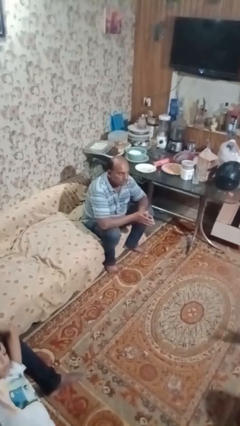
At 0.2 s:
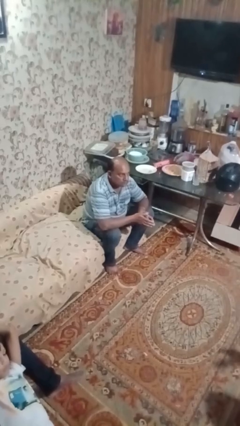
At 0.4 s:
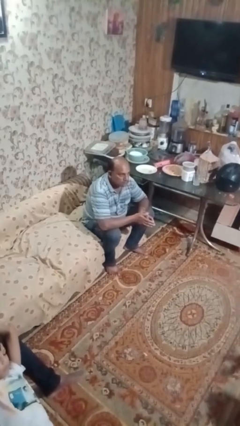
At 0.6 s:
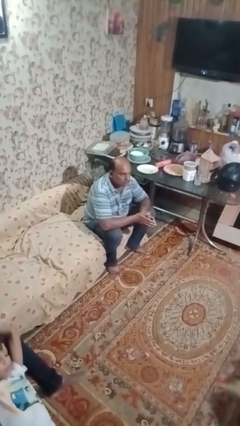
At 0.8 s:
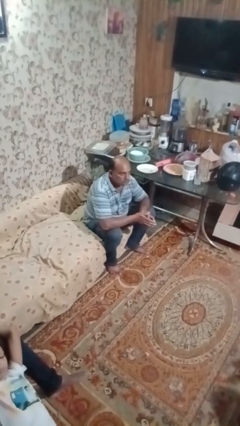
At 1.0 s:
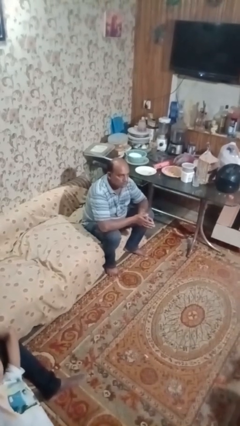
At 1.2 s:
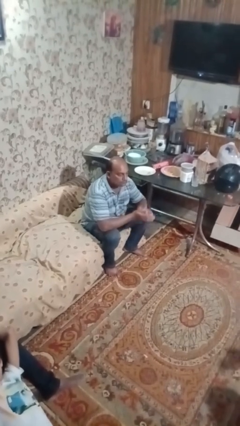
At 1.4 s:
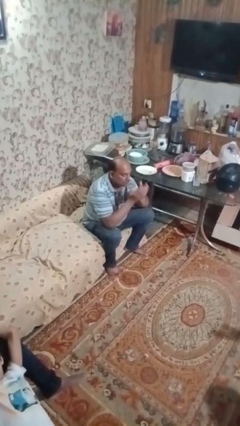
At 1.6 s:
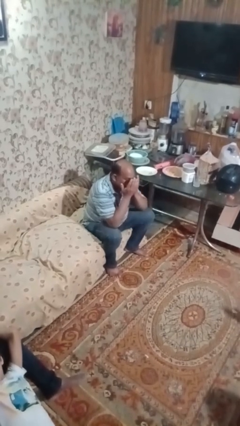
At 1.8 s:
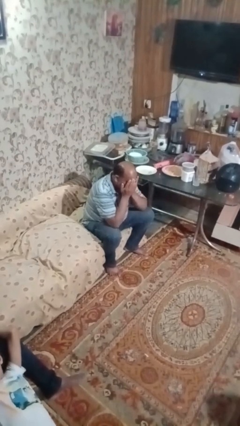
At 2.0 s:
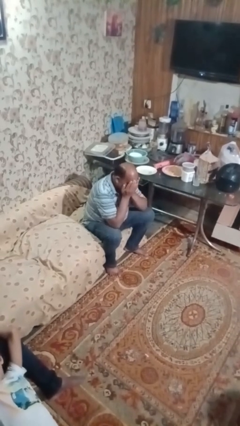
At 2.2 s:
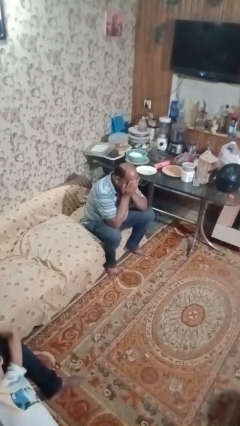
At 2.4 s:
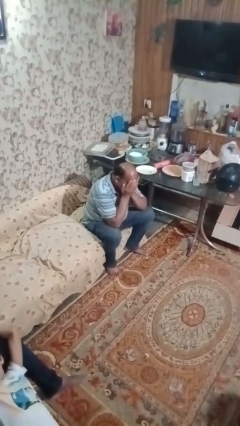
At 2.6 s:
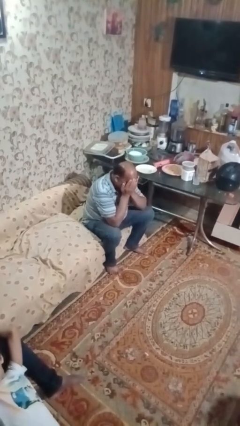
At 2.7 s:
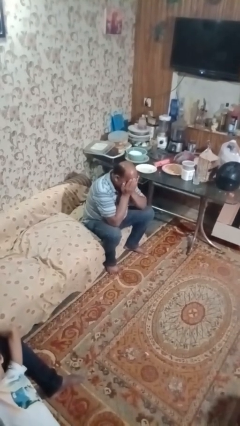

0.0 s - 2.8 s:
person covers face with hands

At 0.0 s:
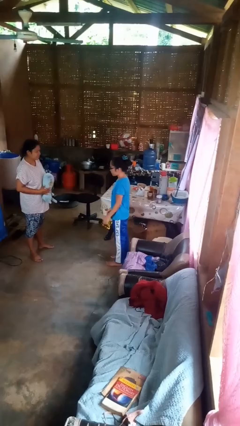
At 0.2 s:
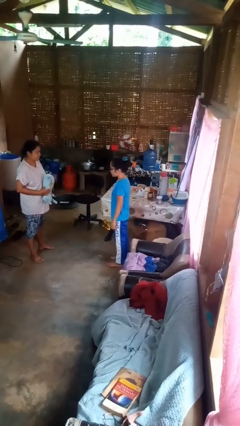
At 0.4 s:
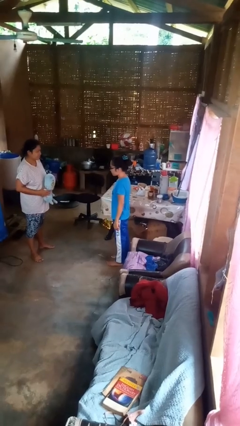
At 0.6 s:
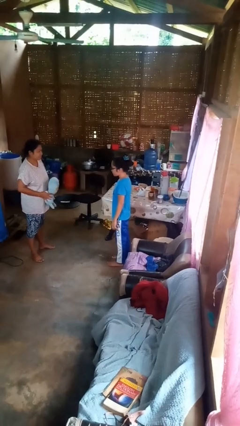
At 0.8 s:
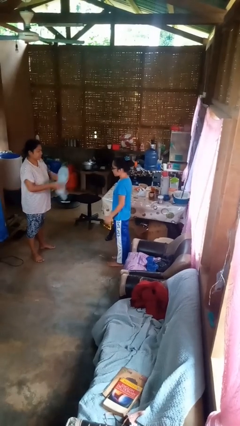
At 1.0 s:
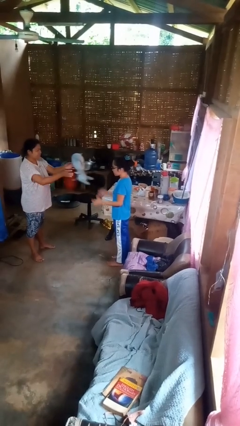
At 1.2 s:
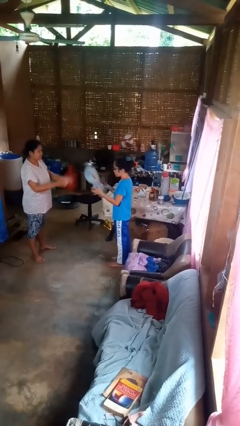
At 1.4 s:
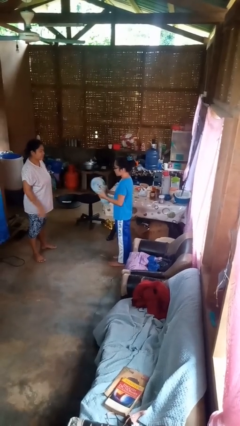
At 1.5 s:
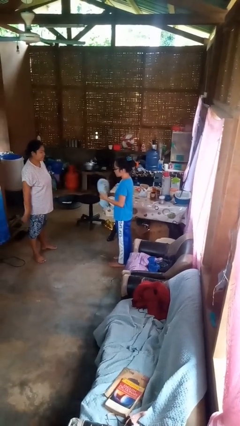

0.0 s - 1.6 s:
person catches object from person

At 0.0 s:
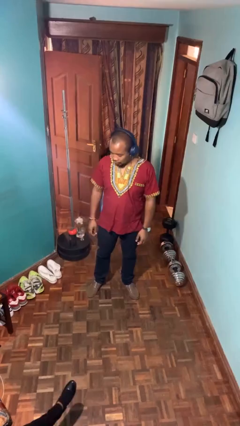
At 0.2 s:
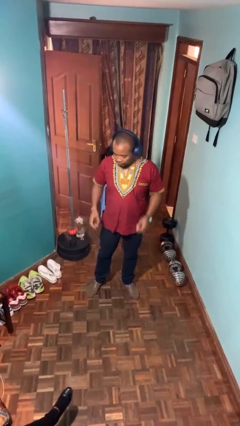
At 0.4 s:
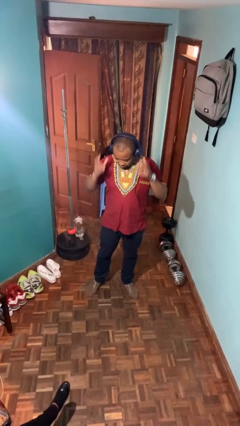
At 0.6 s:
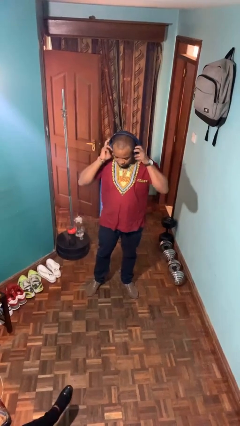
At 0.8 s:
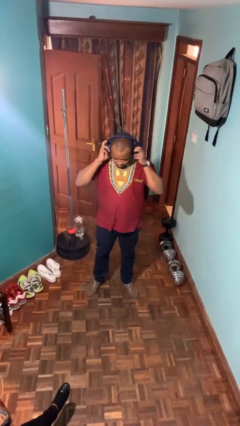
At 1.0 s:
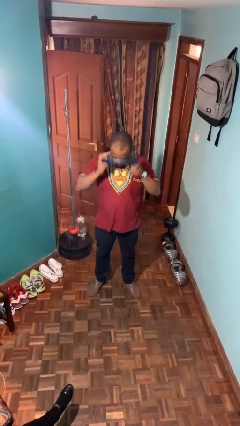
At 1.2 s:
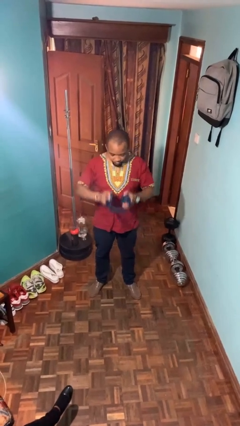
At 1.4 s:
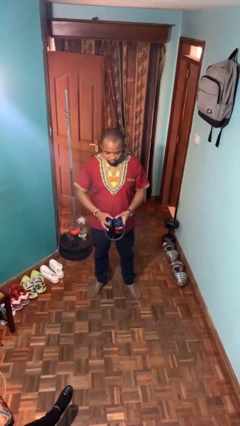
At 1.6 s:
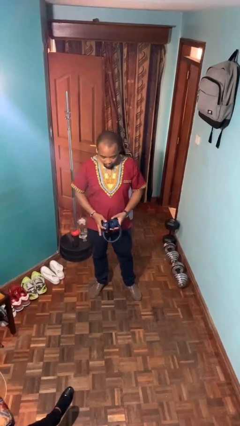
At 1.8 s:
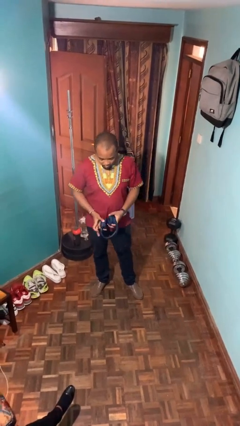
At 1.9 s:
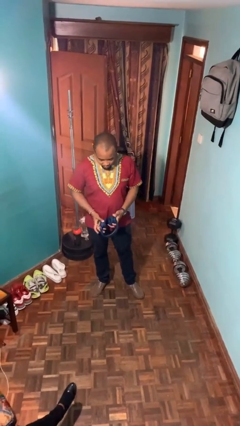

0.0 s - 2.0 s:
person takes off headphones

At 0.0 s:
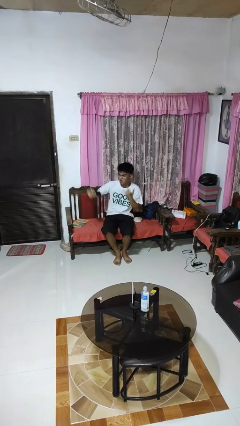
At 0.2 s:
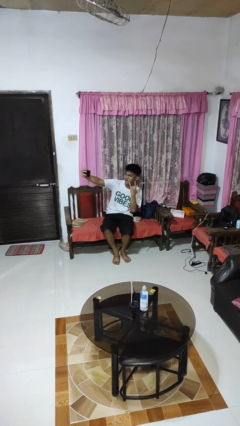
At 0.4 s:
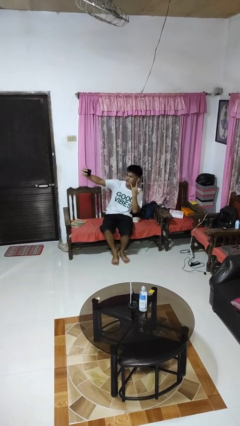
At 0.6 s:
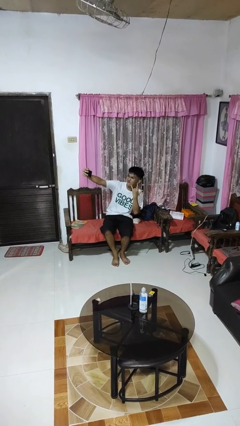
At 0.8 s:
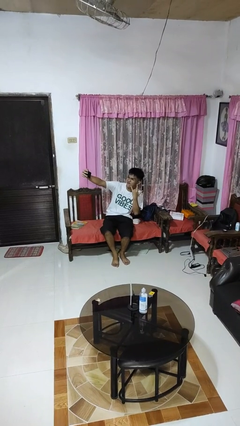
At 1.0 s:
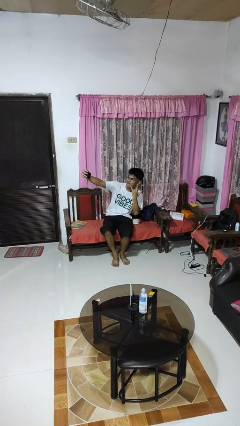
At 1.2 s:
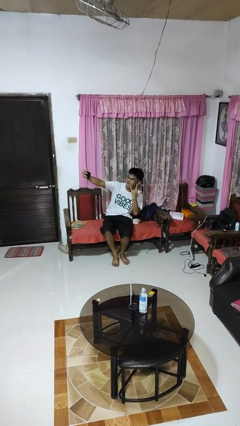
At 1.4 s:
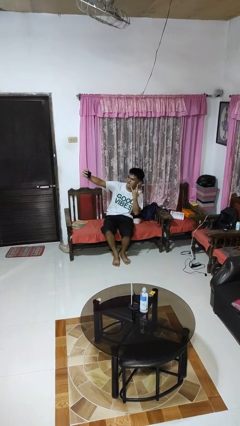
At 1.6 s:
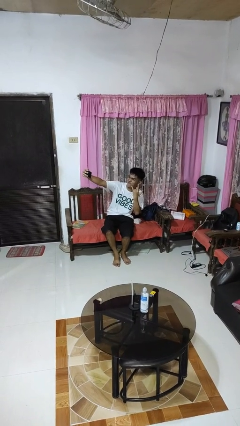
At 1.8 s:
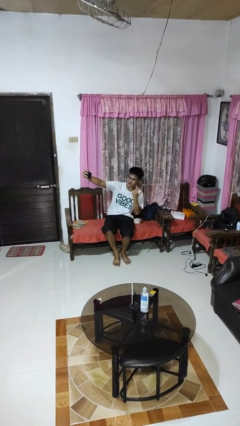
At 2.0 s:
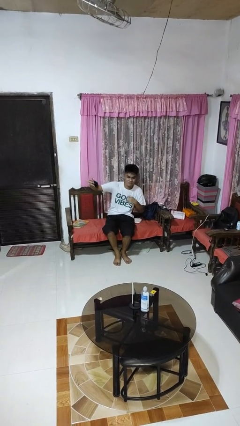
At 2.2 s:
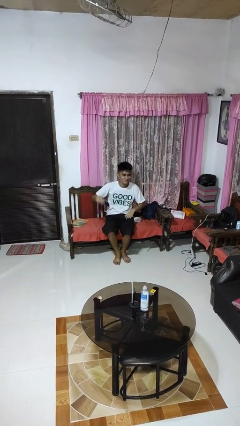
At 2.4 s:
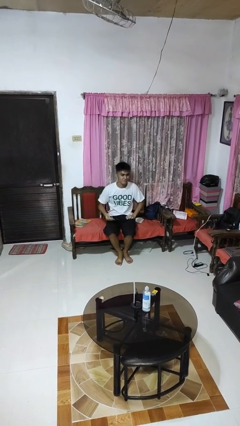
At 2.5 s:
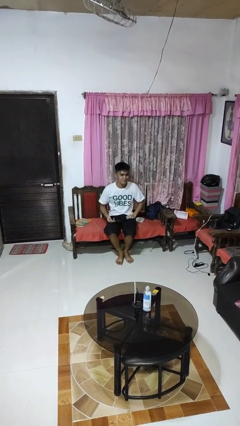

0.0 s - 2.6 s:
person takes selfie

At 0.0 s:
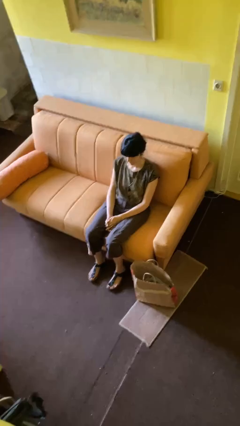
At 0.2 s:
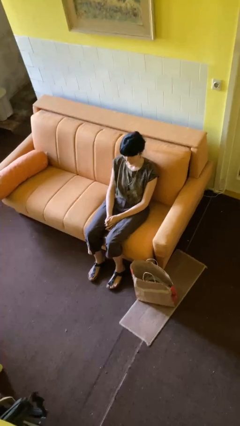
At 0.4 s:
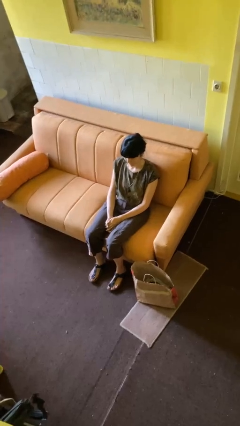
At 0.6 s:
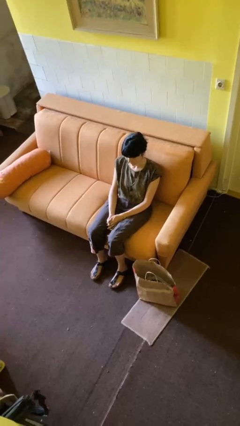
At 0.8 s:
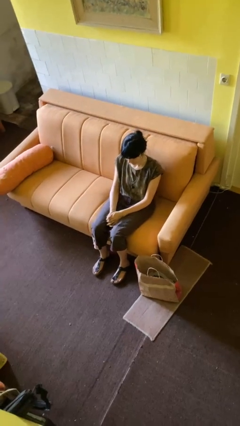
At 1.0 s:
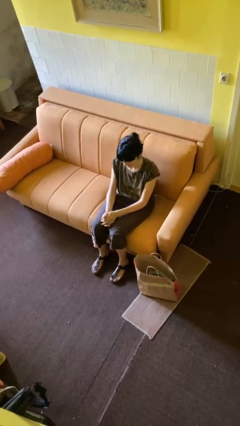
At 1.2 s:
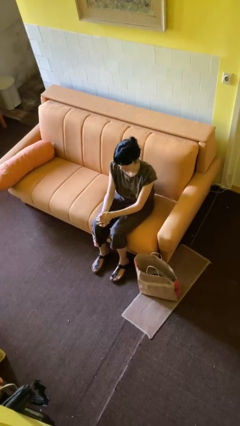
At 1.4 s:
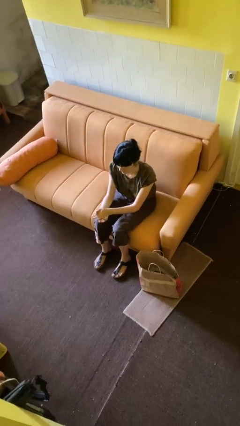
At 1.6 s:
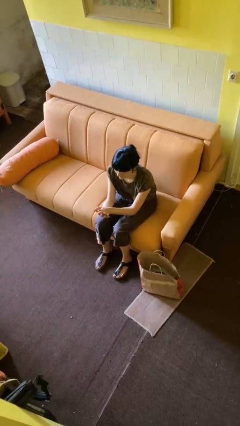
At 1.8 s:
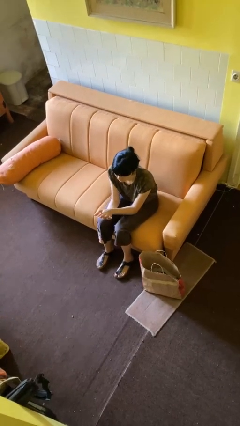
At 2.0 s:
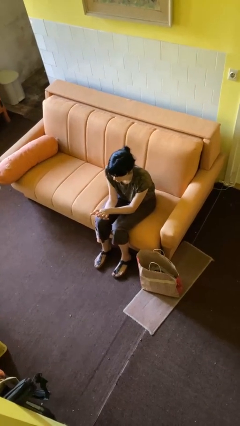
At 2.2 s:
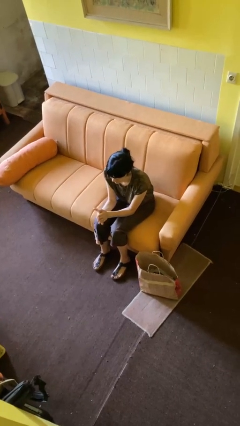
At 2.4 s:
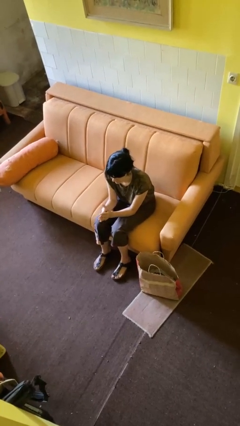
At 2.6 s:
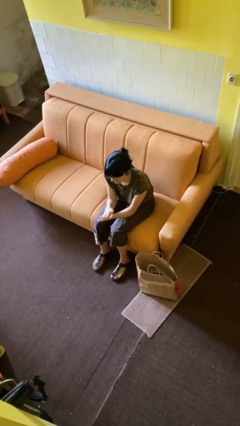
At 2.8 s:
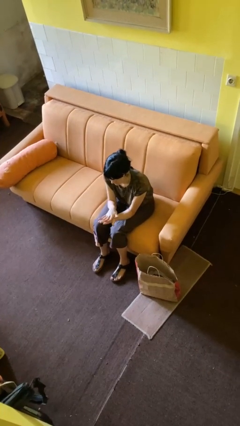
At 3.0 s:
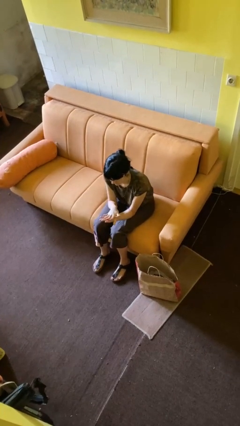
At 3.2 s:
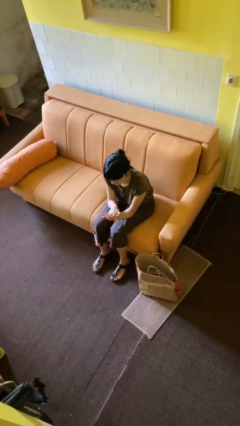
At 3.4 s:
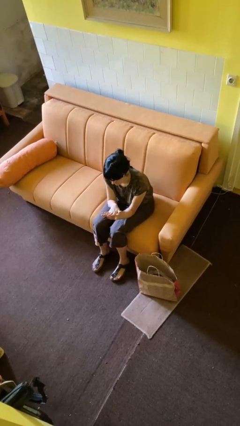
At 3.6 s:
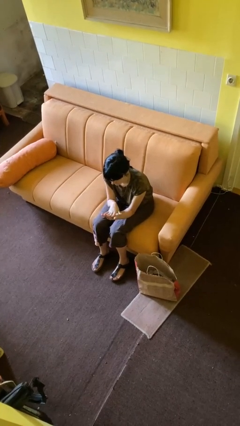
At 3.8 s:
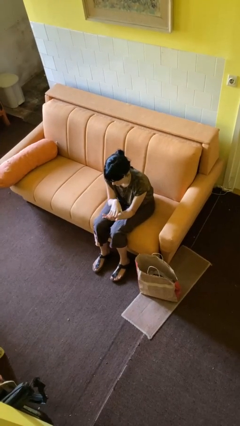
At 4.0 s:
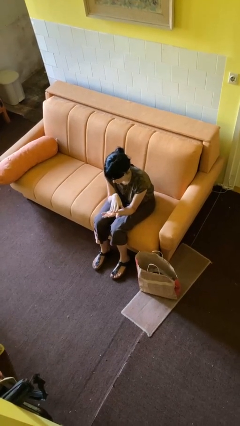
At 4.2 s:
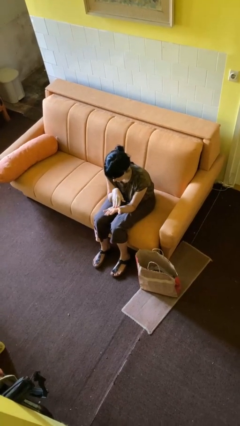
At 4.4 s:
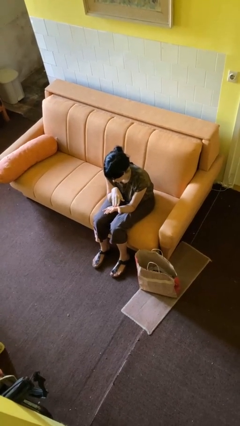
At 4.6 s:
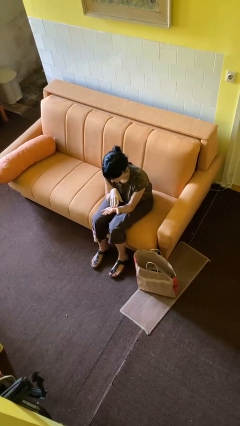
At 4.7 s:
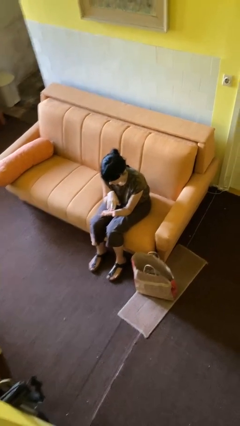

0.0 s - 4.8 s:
person looks at hands in lap

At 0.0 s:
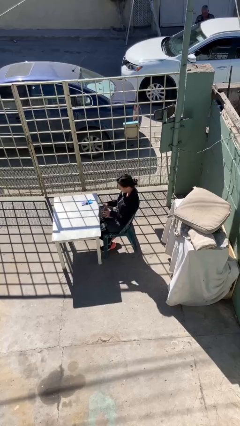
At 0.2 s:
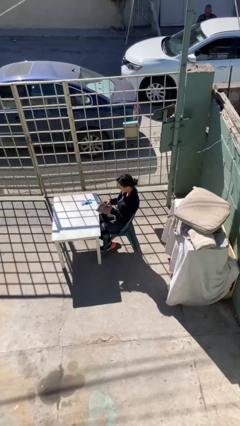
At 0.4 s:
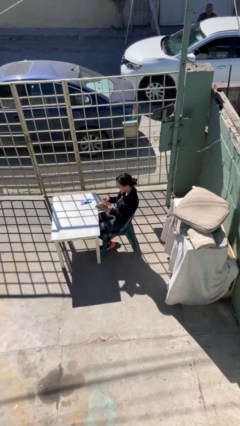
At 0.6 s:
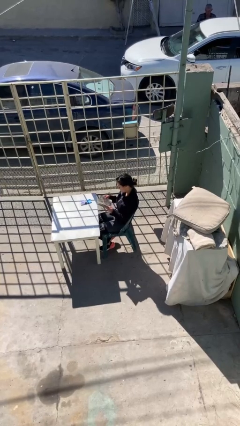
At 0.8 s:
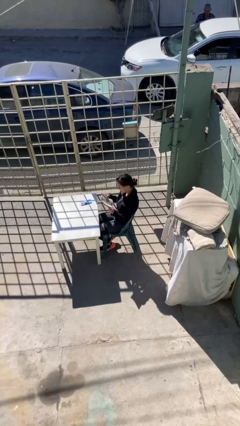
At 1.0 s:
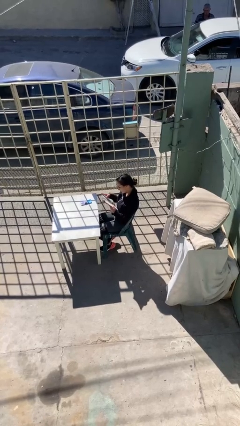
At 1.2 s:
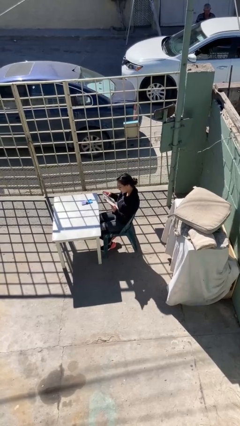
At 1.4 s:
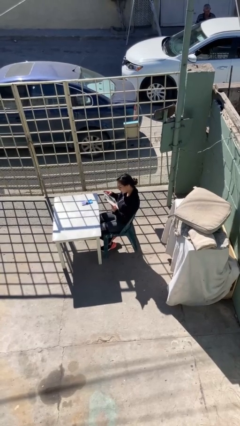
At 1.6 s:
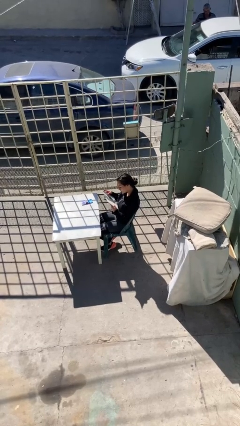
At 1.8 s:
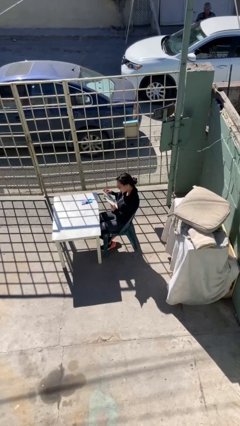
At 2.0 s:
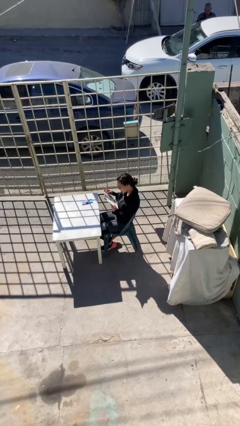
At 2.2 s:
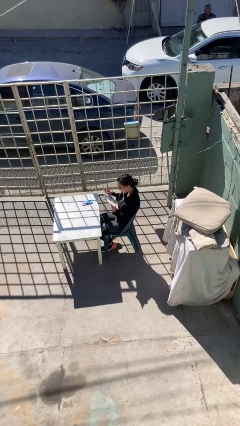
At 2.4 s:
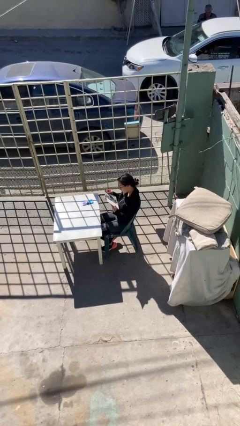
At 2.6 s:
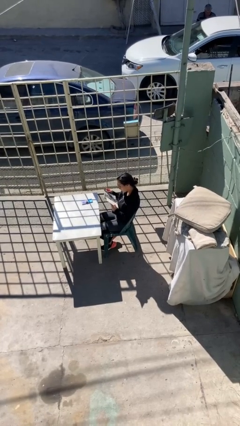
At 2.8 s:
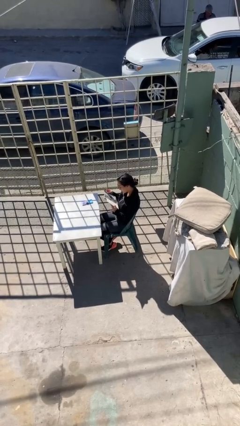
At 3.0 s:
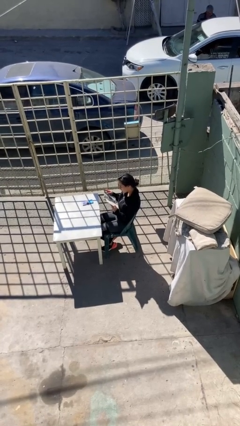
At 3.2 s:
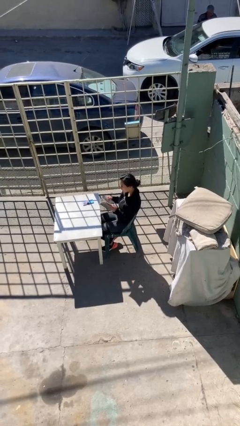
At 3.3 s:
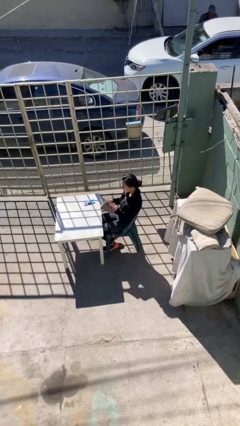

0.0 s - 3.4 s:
person reads document
